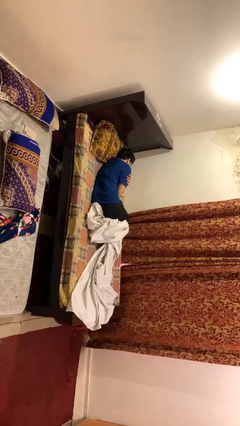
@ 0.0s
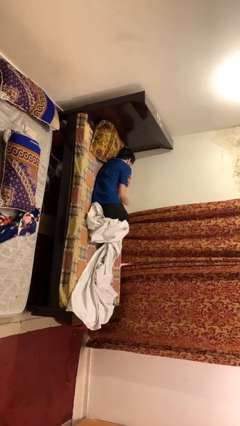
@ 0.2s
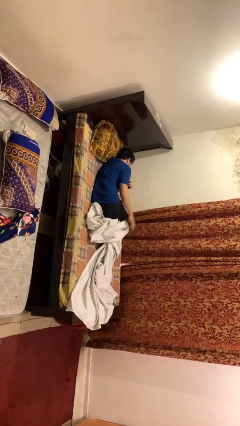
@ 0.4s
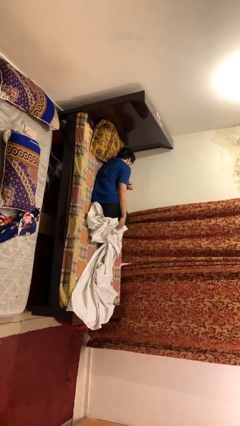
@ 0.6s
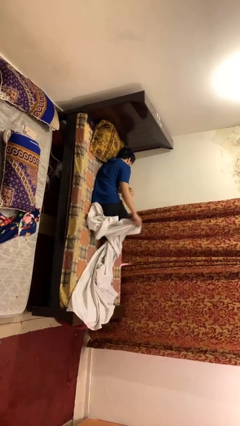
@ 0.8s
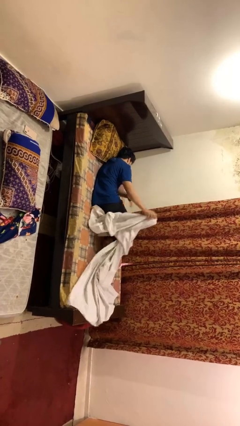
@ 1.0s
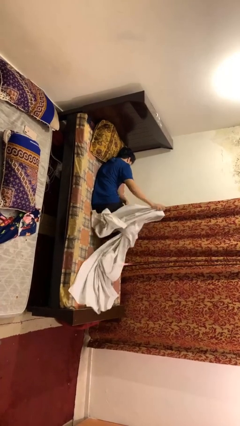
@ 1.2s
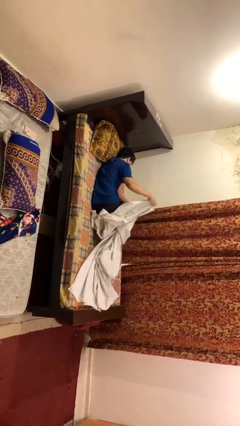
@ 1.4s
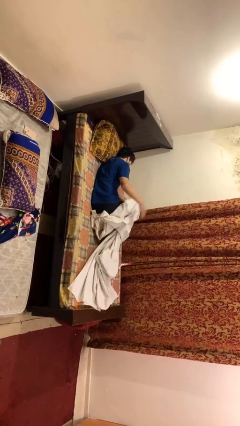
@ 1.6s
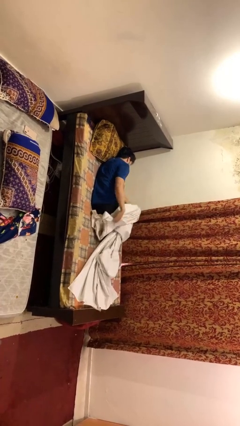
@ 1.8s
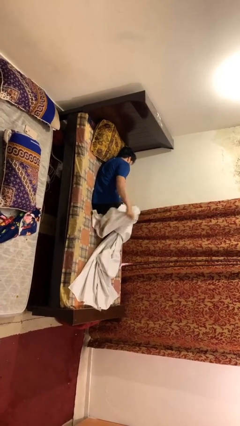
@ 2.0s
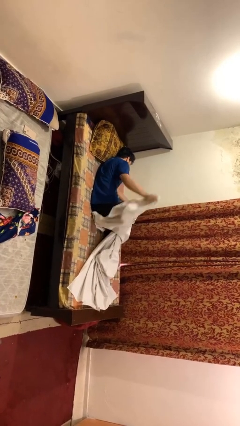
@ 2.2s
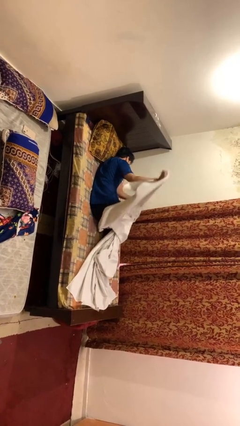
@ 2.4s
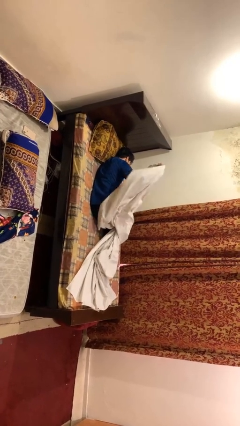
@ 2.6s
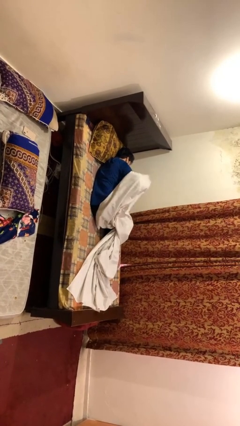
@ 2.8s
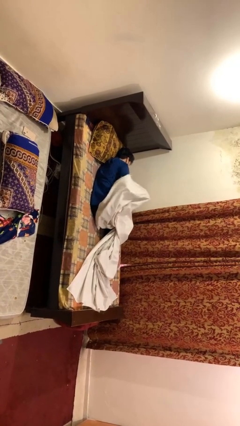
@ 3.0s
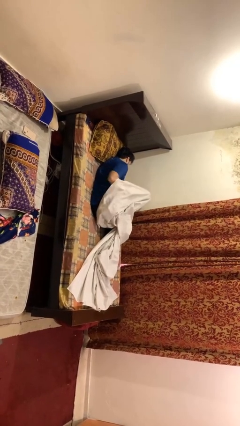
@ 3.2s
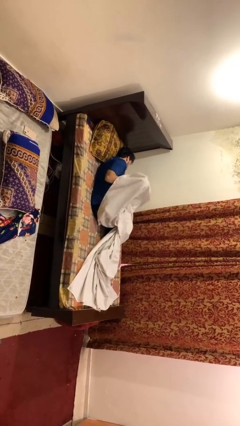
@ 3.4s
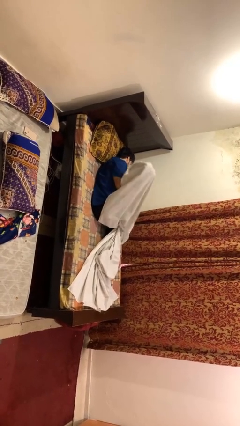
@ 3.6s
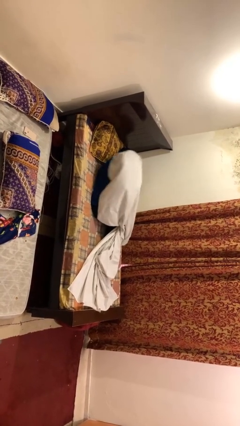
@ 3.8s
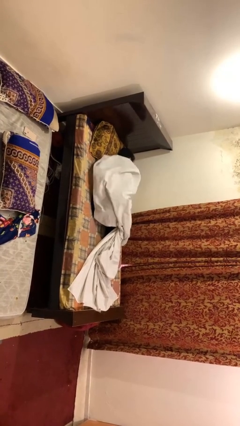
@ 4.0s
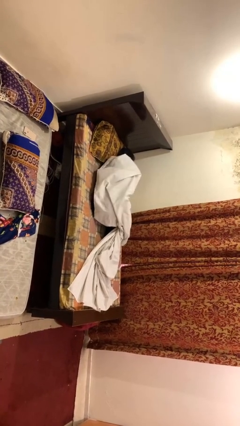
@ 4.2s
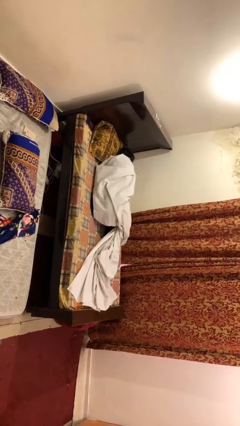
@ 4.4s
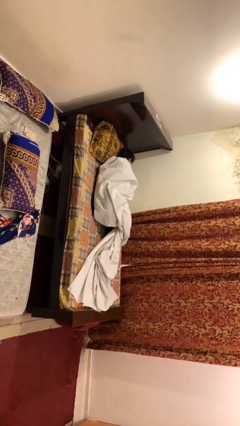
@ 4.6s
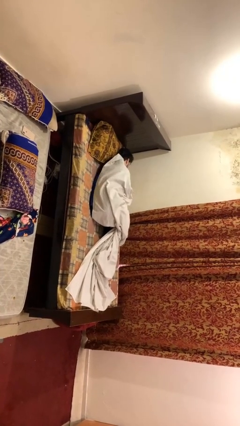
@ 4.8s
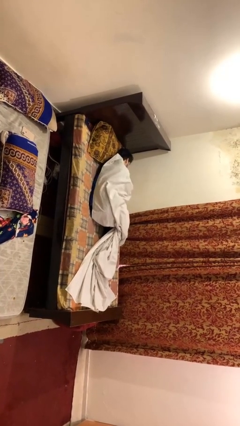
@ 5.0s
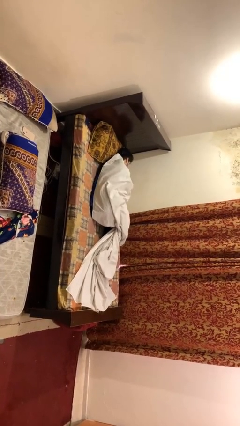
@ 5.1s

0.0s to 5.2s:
person covers with bedsheets

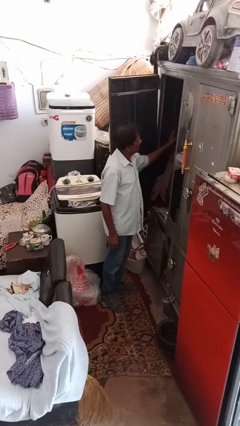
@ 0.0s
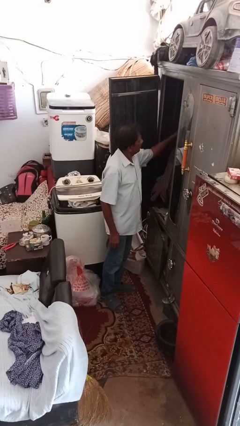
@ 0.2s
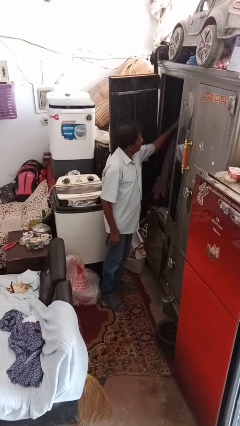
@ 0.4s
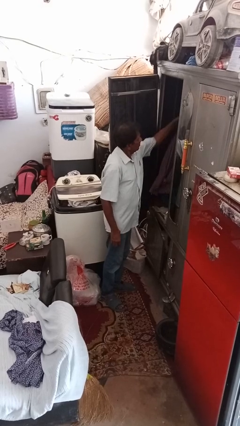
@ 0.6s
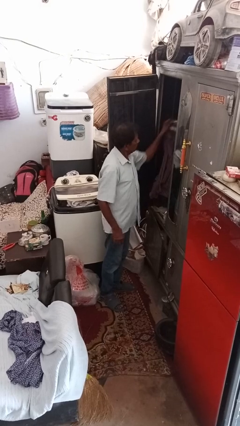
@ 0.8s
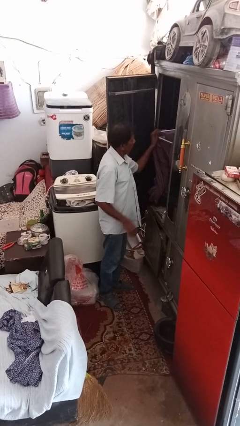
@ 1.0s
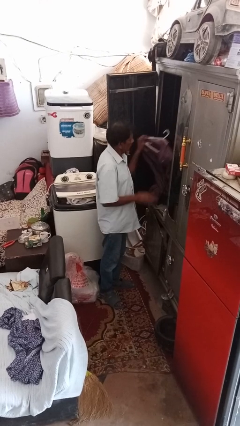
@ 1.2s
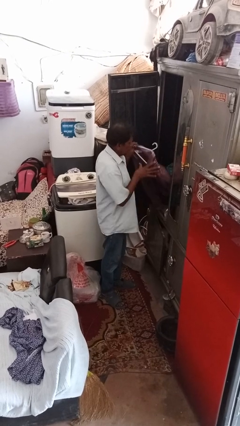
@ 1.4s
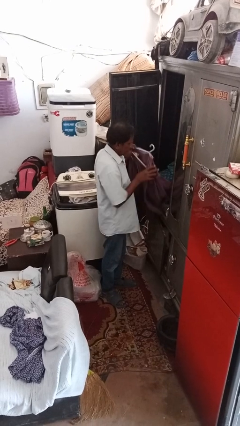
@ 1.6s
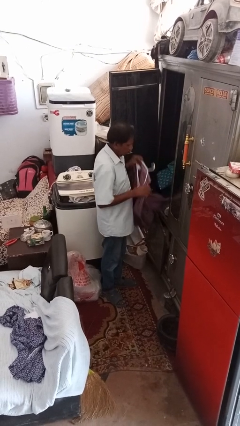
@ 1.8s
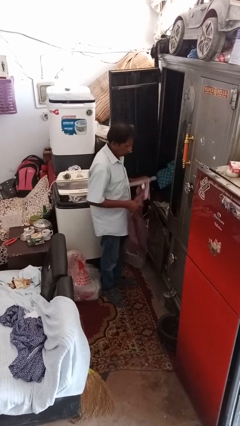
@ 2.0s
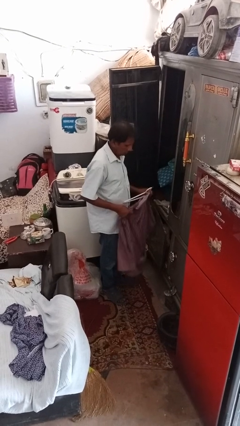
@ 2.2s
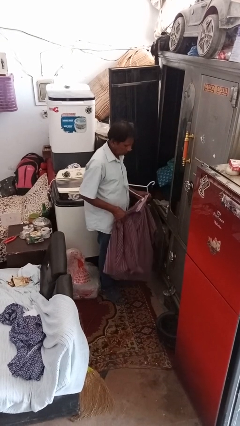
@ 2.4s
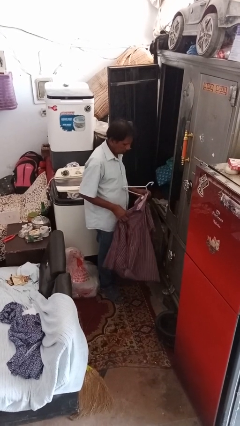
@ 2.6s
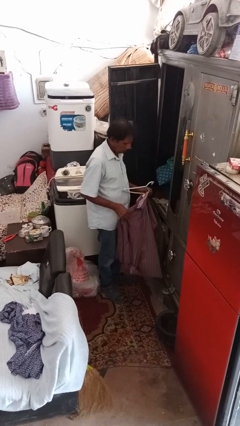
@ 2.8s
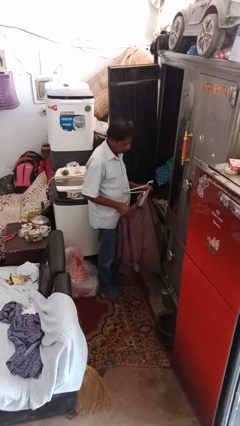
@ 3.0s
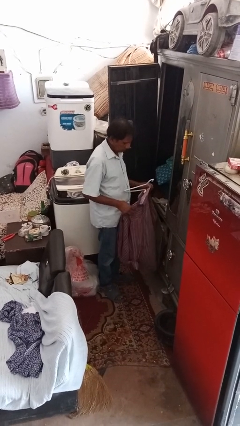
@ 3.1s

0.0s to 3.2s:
person takes clothes from closet

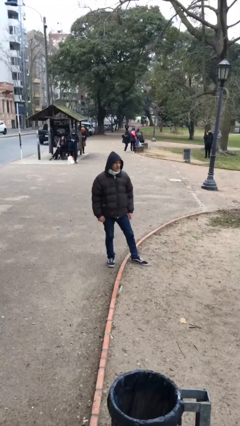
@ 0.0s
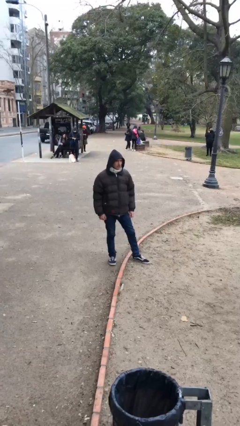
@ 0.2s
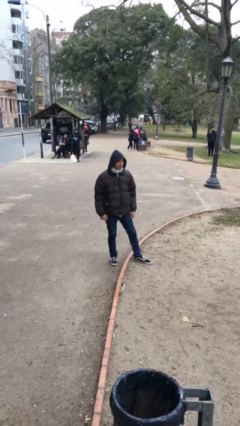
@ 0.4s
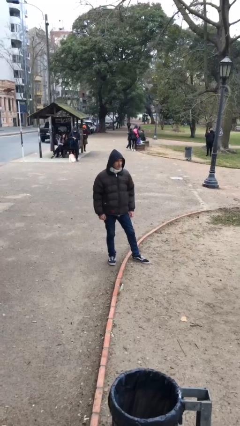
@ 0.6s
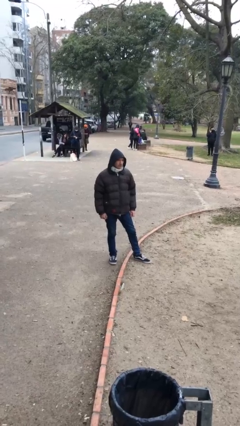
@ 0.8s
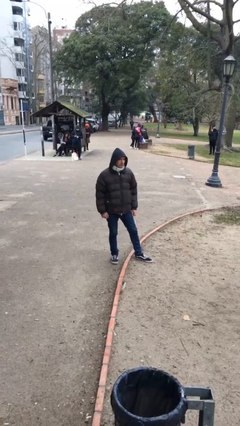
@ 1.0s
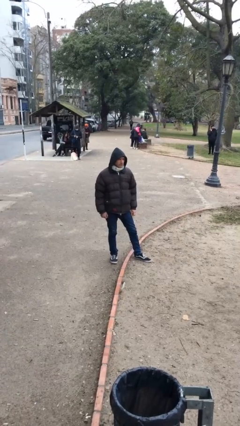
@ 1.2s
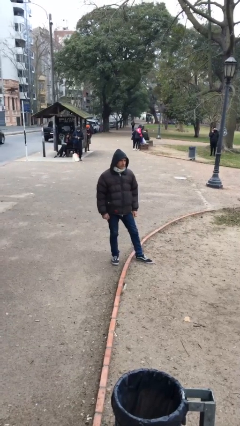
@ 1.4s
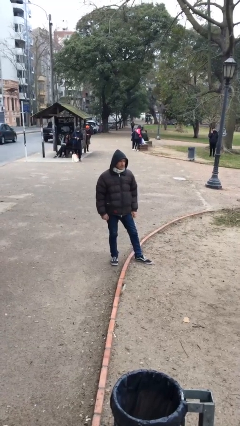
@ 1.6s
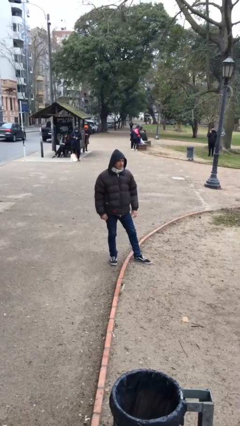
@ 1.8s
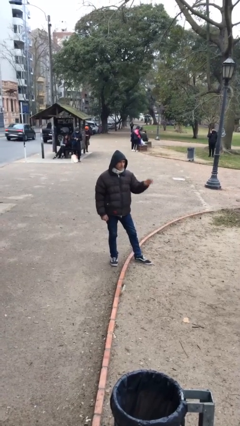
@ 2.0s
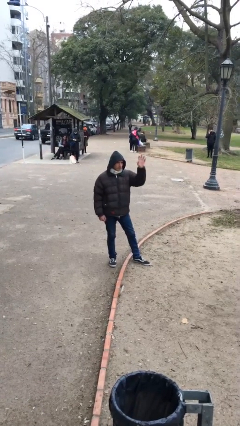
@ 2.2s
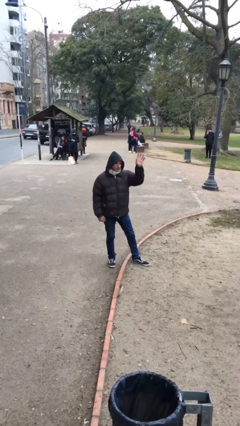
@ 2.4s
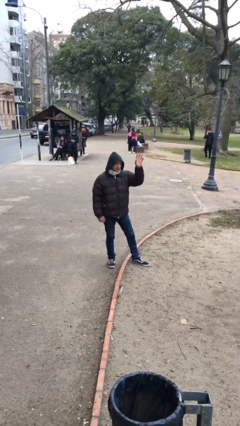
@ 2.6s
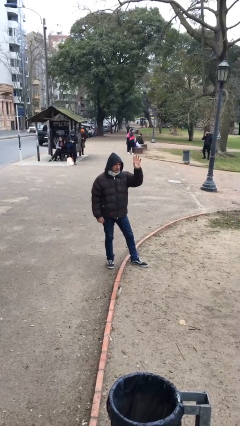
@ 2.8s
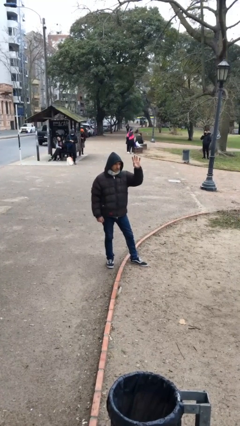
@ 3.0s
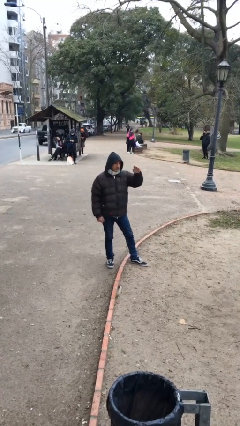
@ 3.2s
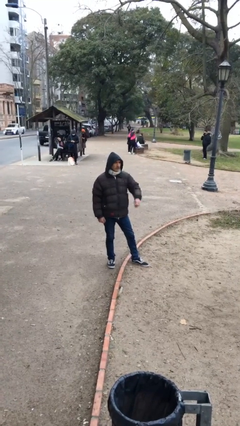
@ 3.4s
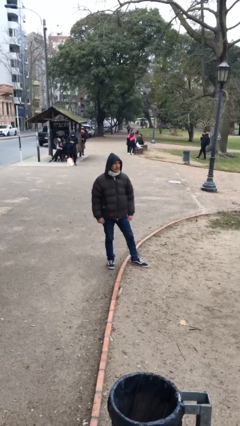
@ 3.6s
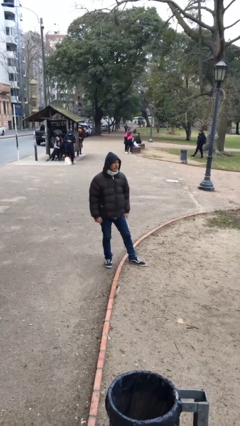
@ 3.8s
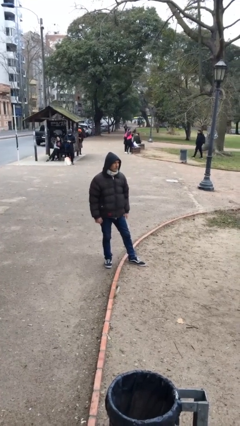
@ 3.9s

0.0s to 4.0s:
person waves at person

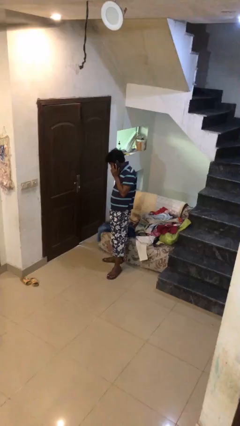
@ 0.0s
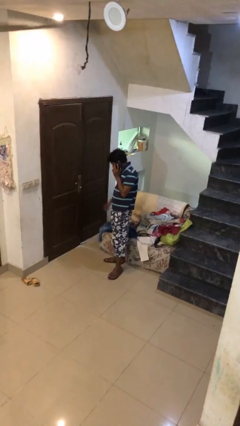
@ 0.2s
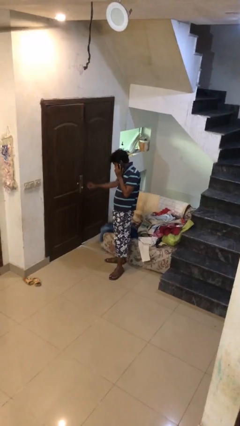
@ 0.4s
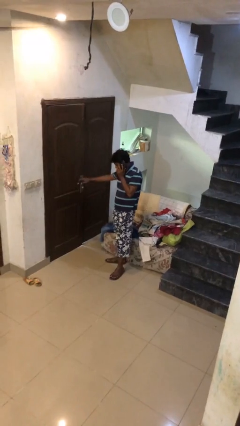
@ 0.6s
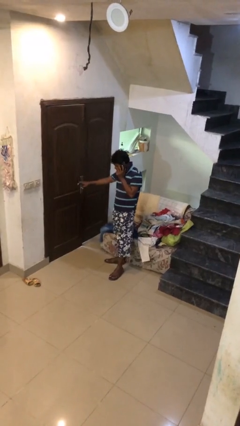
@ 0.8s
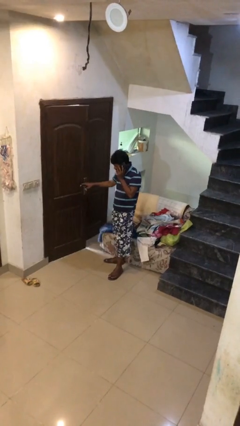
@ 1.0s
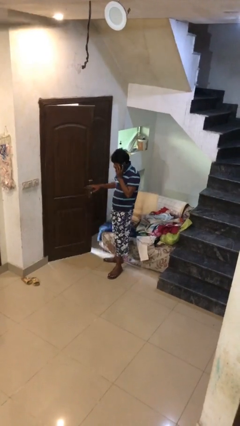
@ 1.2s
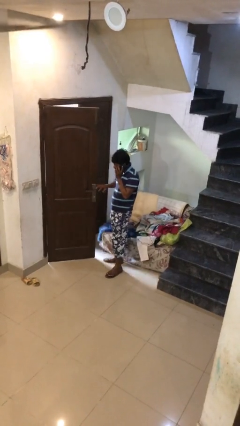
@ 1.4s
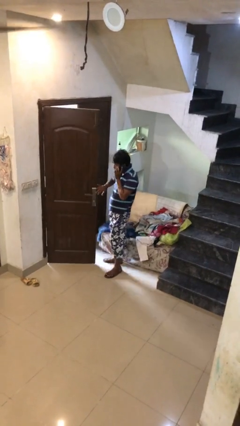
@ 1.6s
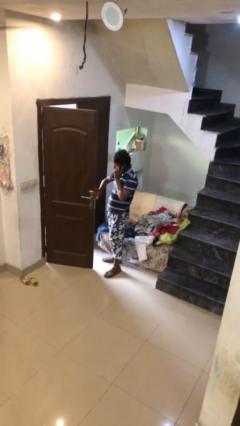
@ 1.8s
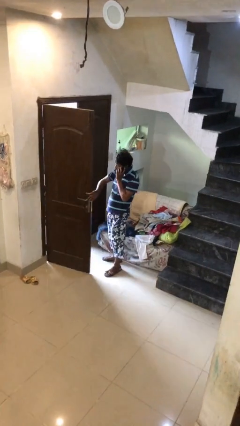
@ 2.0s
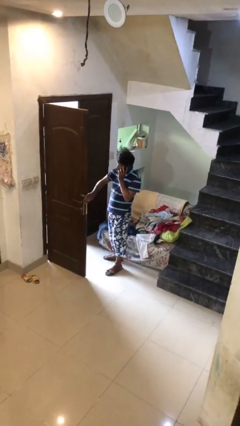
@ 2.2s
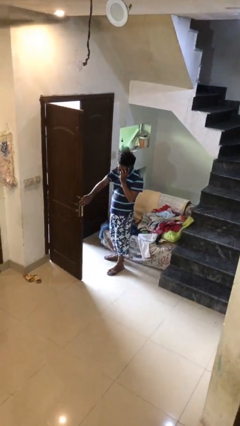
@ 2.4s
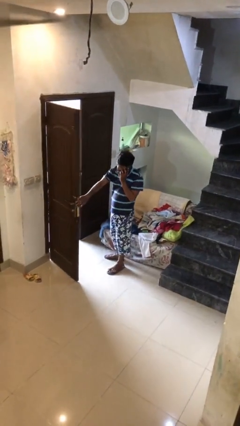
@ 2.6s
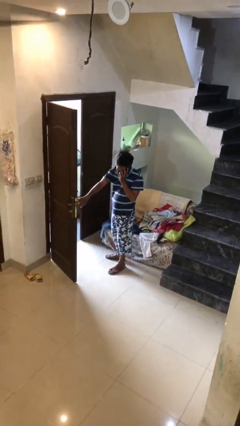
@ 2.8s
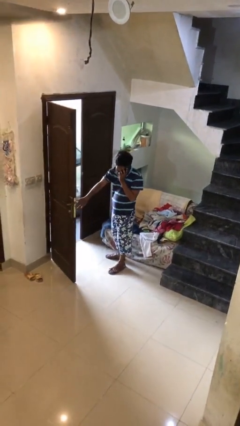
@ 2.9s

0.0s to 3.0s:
person opens facility door

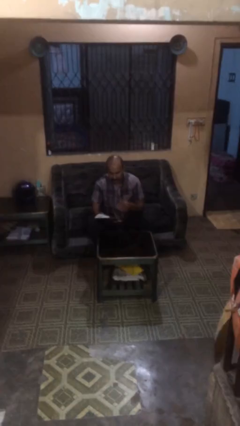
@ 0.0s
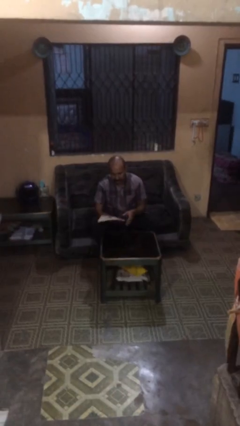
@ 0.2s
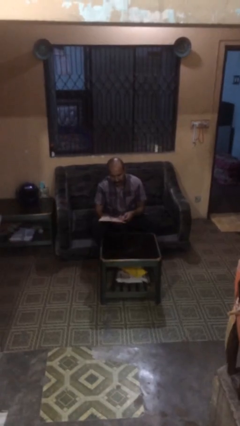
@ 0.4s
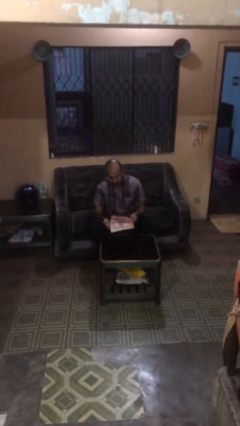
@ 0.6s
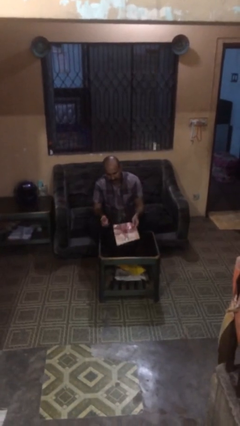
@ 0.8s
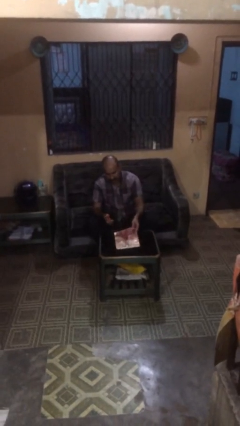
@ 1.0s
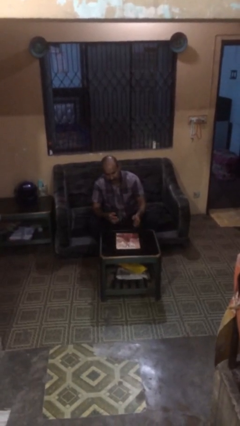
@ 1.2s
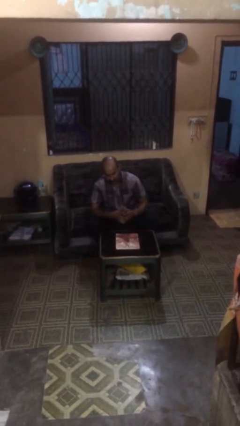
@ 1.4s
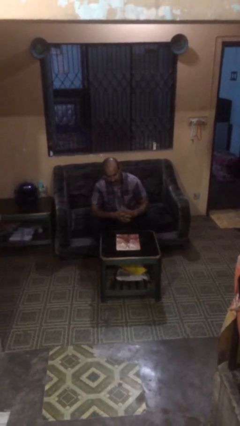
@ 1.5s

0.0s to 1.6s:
person puts down object on table

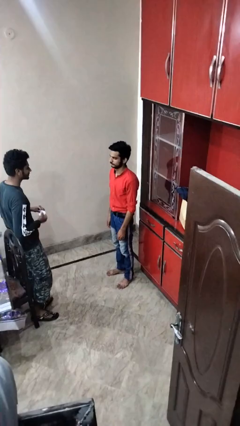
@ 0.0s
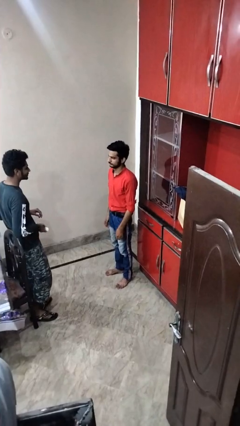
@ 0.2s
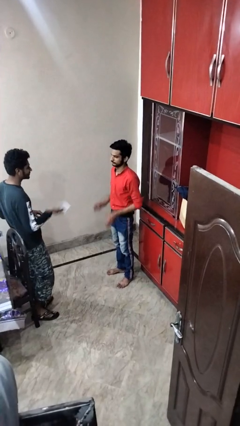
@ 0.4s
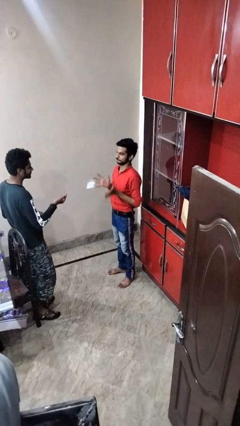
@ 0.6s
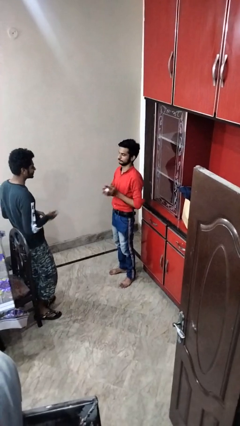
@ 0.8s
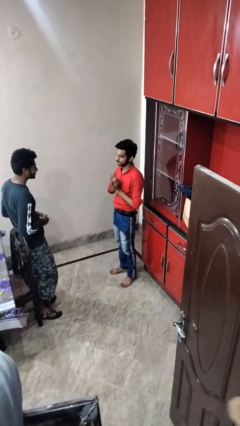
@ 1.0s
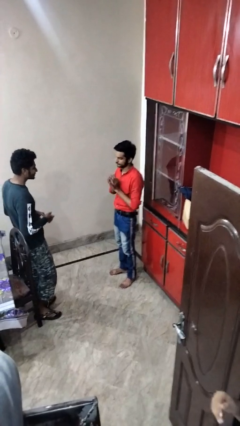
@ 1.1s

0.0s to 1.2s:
person catches object from person
